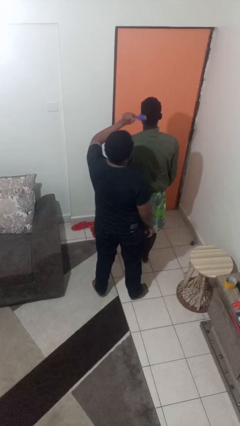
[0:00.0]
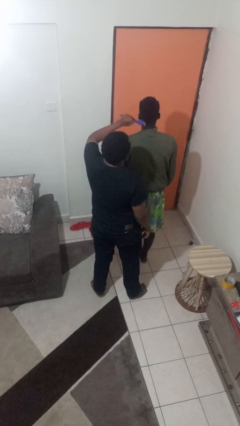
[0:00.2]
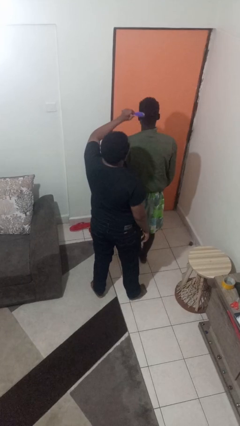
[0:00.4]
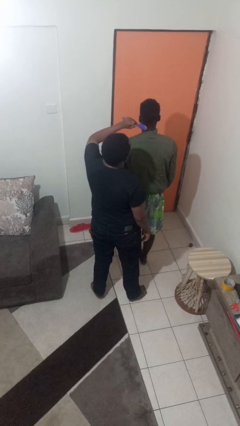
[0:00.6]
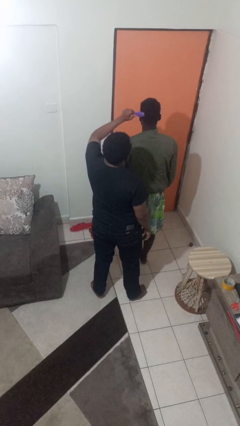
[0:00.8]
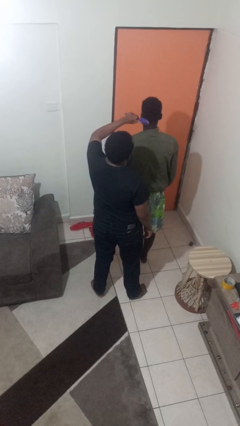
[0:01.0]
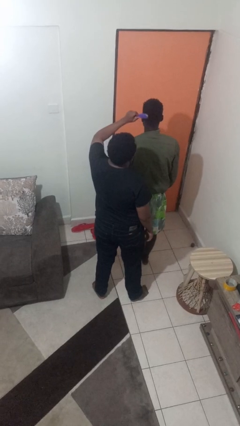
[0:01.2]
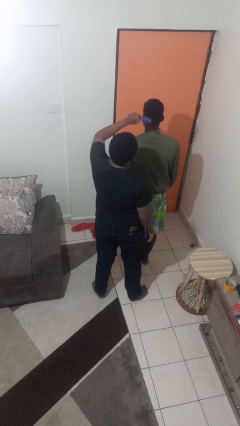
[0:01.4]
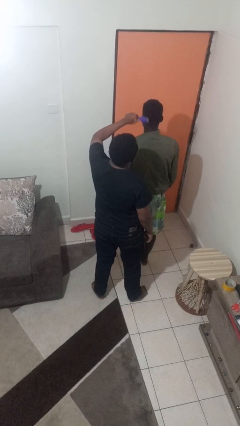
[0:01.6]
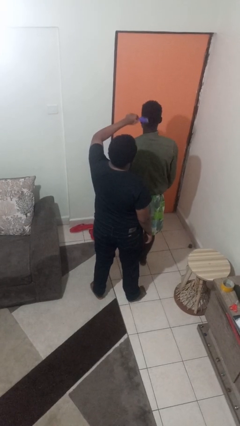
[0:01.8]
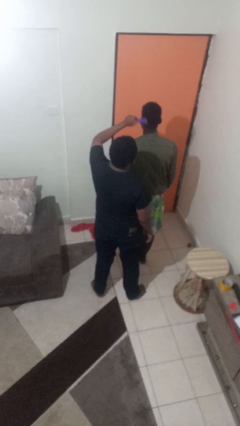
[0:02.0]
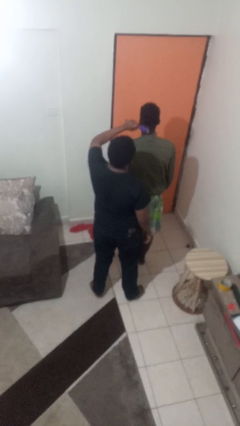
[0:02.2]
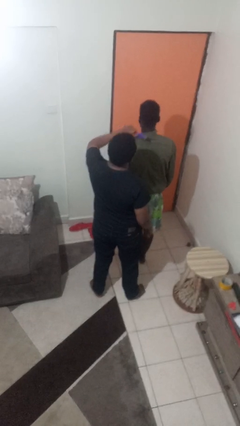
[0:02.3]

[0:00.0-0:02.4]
person brushes hair of person

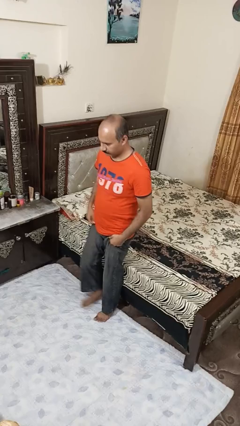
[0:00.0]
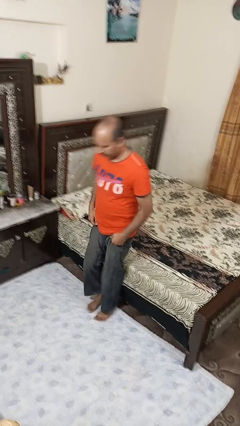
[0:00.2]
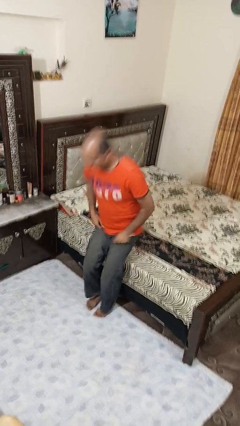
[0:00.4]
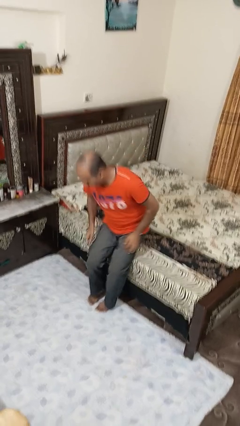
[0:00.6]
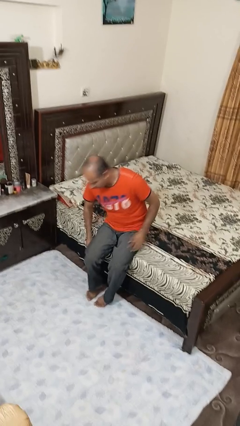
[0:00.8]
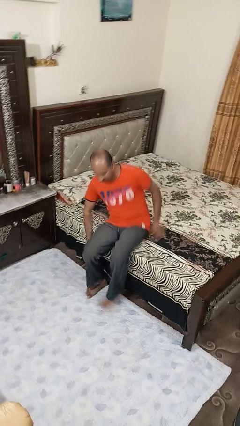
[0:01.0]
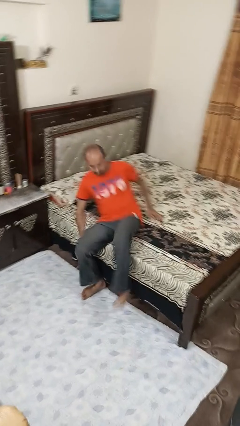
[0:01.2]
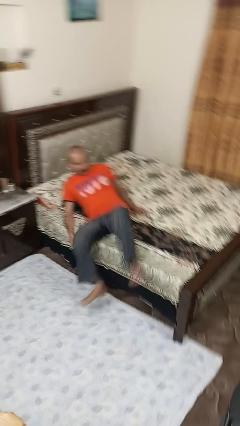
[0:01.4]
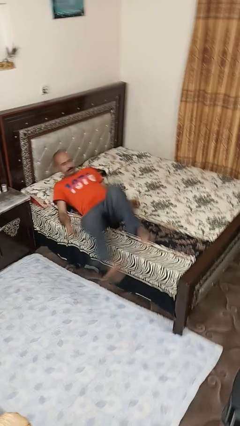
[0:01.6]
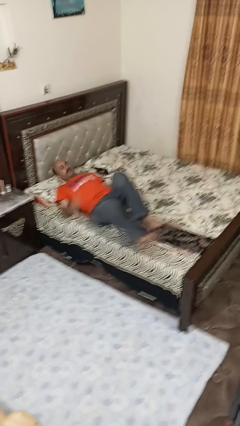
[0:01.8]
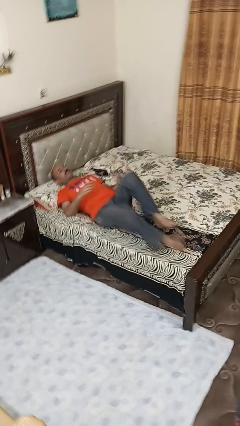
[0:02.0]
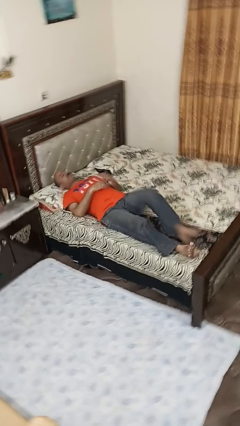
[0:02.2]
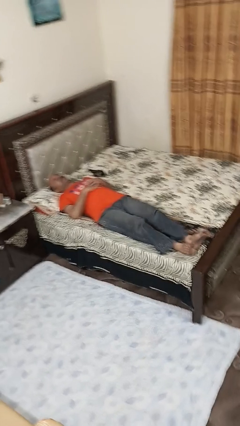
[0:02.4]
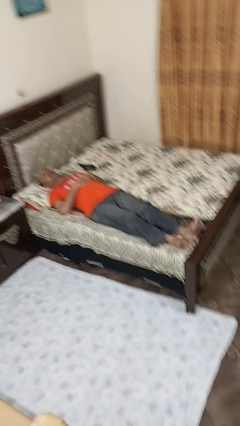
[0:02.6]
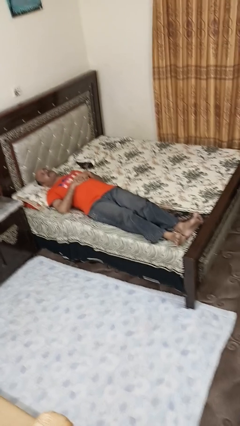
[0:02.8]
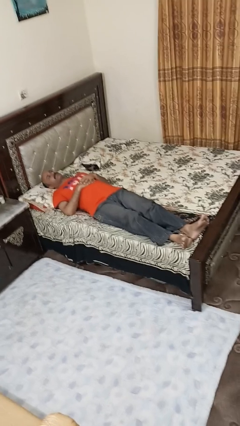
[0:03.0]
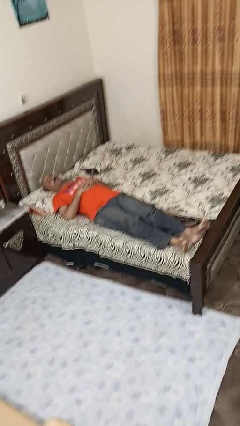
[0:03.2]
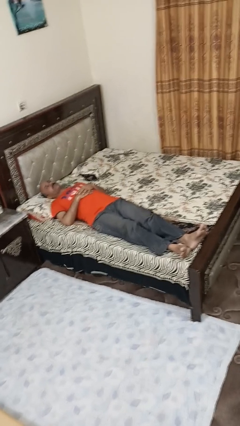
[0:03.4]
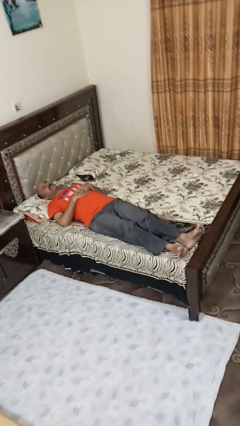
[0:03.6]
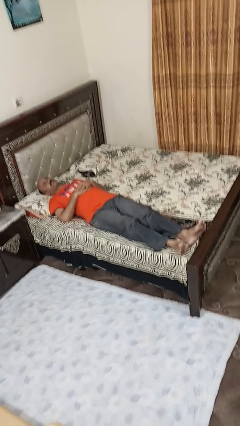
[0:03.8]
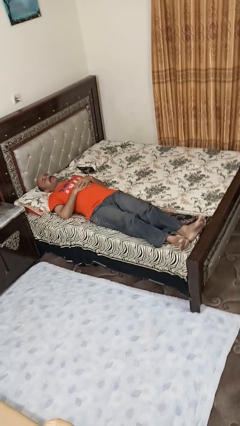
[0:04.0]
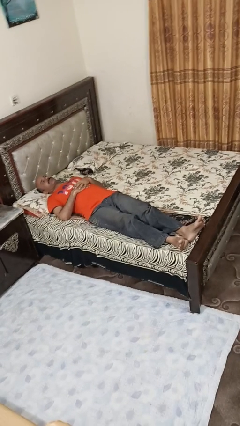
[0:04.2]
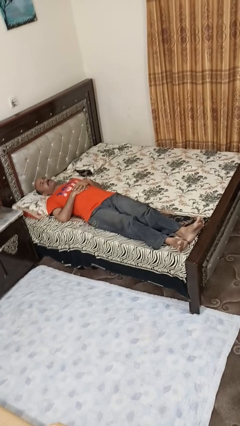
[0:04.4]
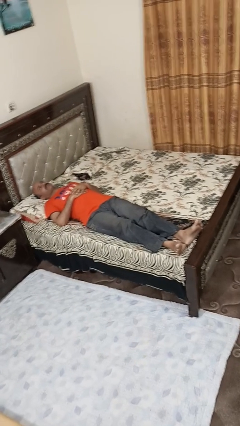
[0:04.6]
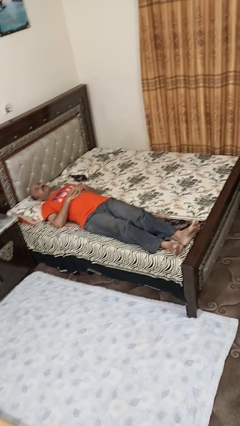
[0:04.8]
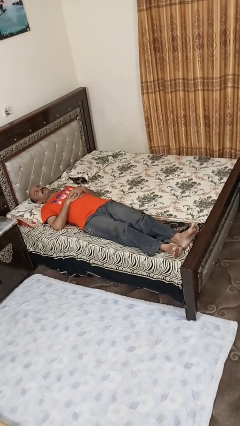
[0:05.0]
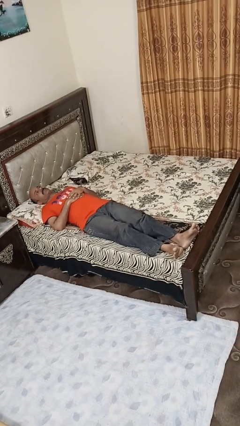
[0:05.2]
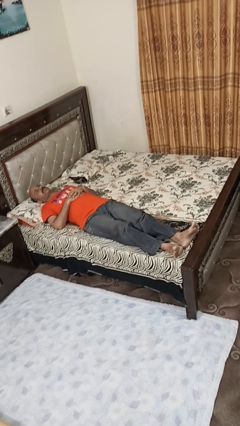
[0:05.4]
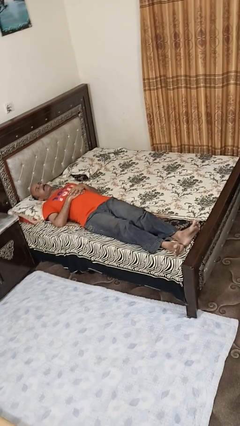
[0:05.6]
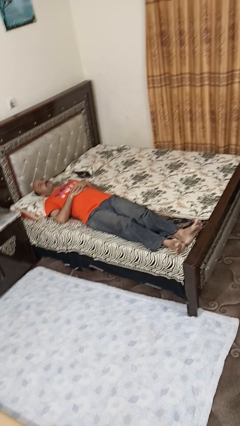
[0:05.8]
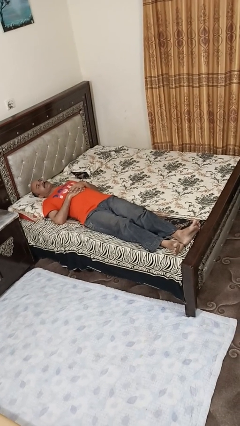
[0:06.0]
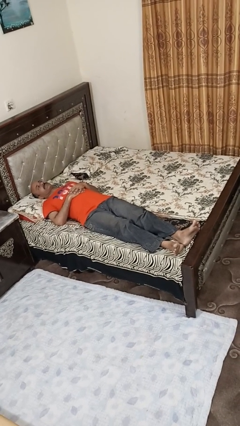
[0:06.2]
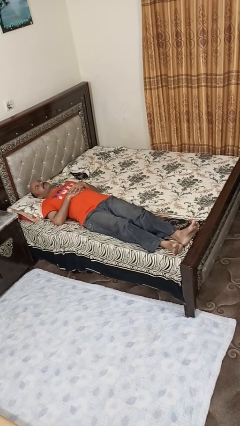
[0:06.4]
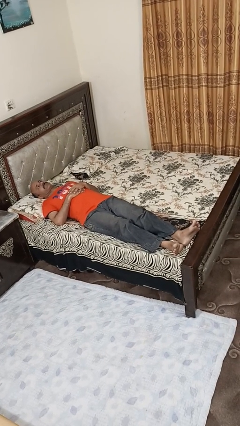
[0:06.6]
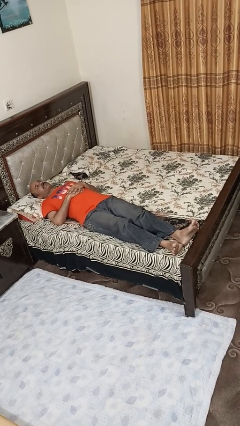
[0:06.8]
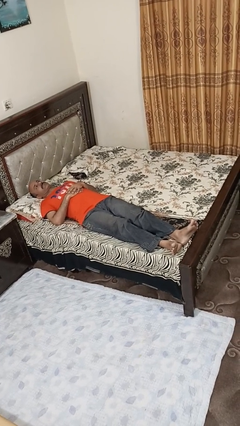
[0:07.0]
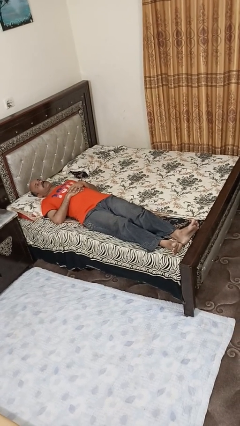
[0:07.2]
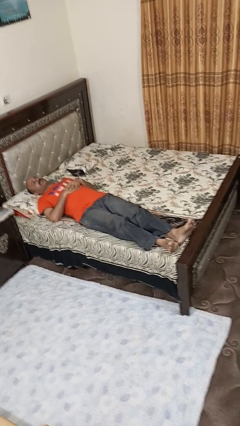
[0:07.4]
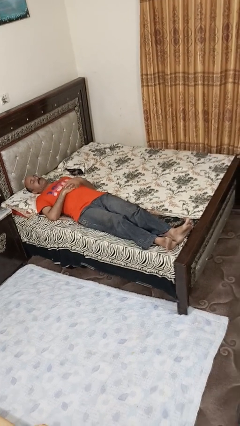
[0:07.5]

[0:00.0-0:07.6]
person lies down on bed

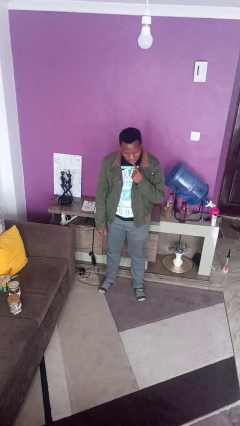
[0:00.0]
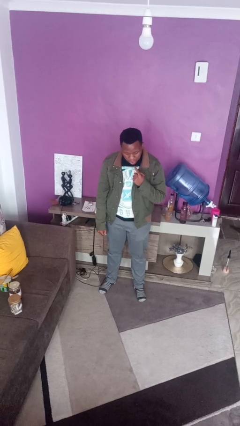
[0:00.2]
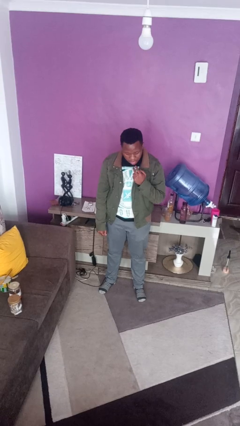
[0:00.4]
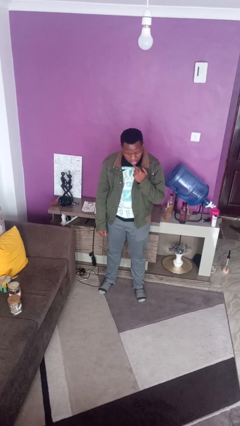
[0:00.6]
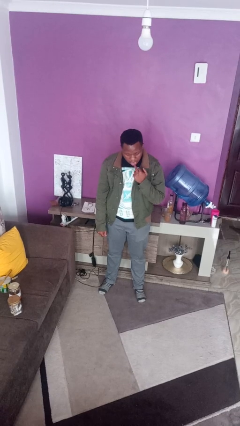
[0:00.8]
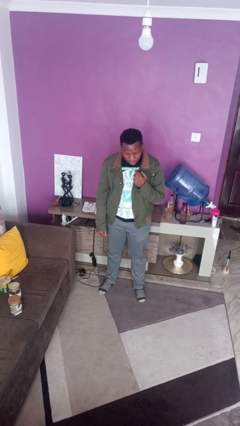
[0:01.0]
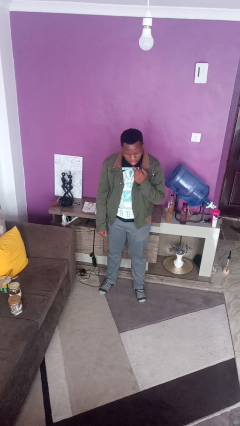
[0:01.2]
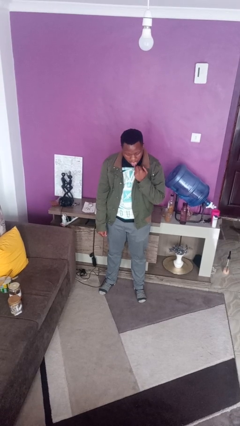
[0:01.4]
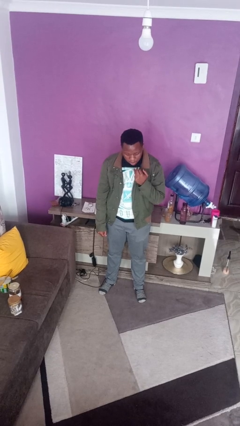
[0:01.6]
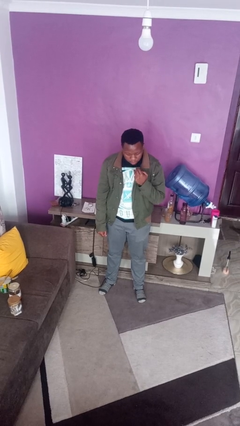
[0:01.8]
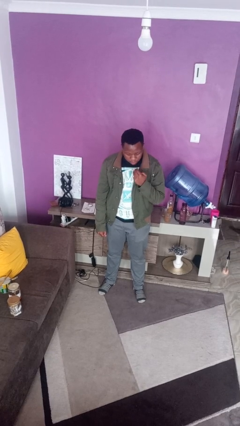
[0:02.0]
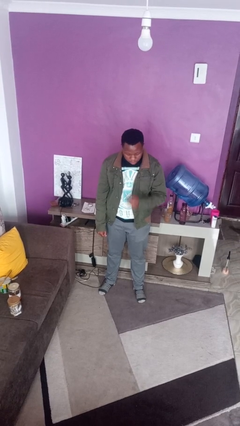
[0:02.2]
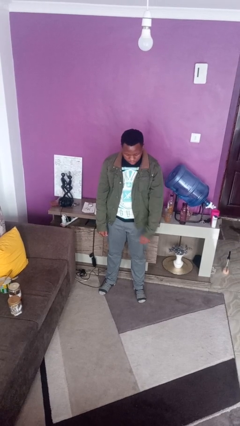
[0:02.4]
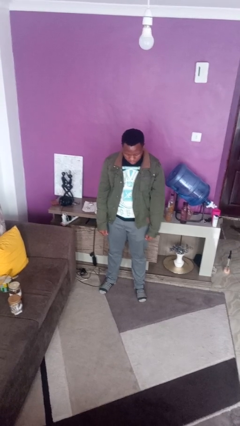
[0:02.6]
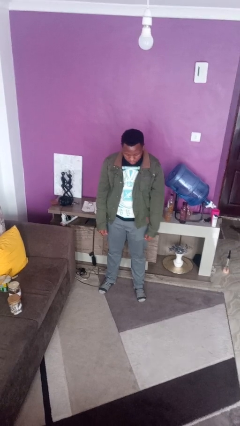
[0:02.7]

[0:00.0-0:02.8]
person licks fingers

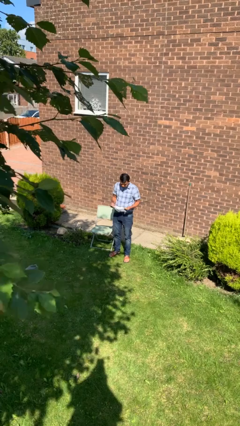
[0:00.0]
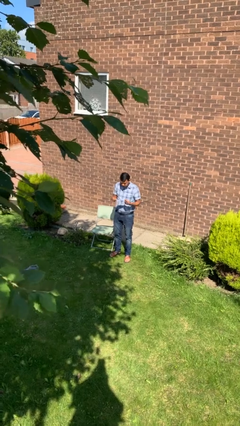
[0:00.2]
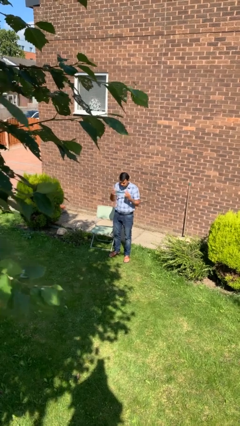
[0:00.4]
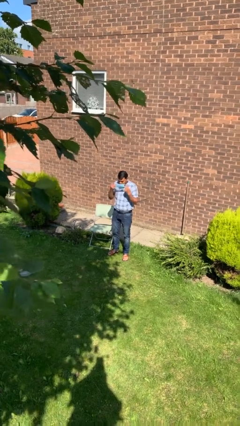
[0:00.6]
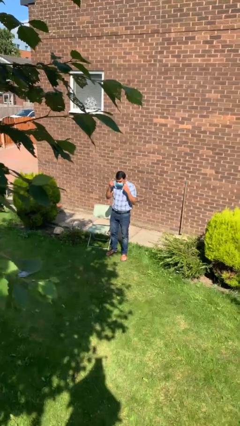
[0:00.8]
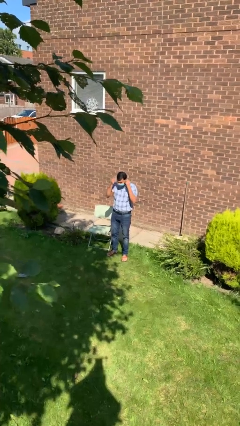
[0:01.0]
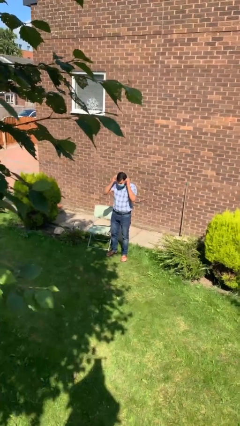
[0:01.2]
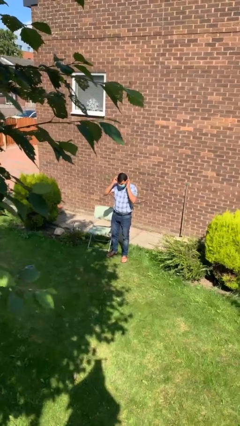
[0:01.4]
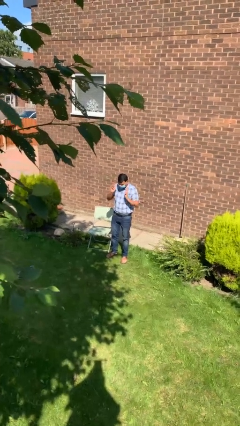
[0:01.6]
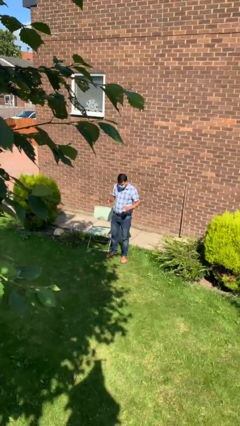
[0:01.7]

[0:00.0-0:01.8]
person puts on facemask

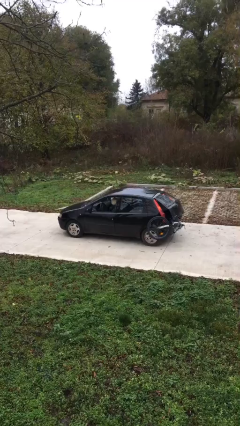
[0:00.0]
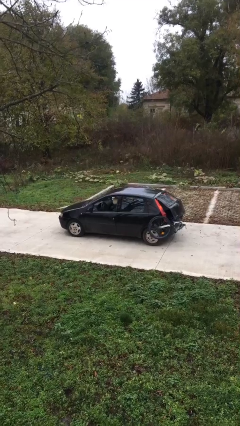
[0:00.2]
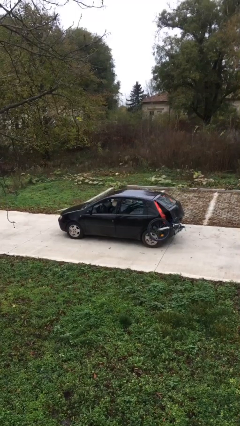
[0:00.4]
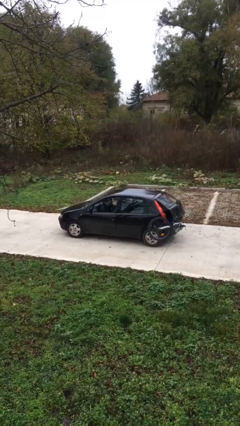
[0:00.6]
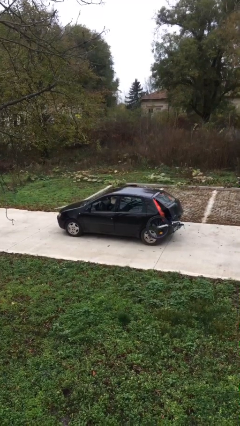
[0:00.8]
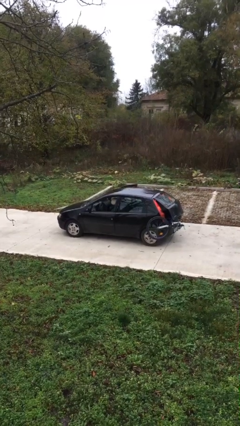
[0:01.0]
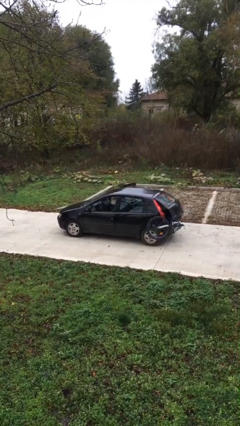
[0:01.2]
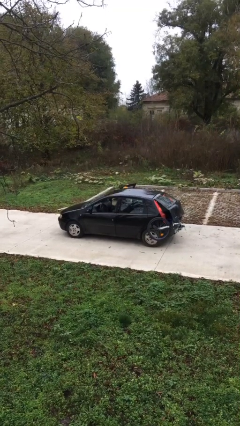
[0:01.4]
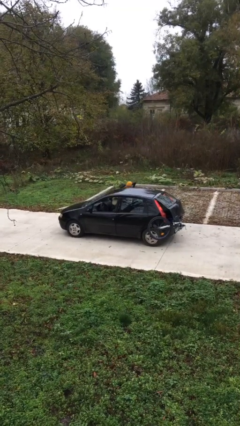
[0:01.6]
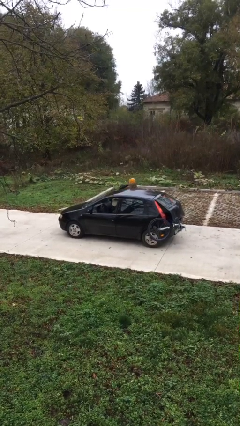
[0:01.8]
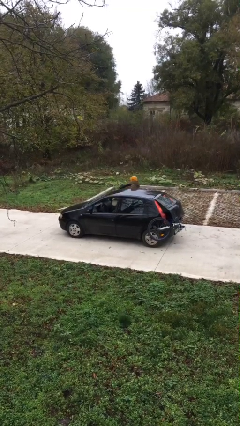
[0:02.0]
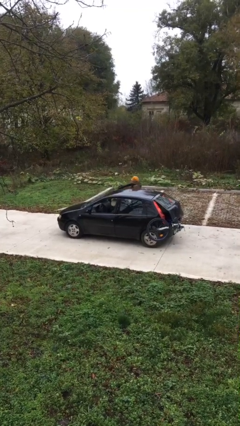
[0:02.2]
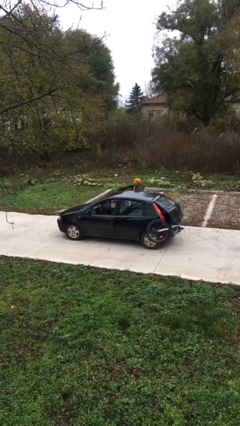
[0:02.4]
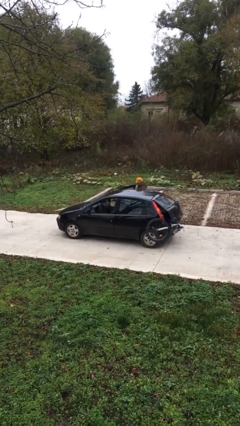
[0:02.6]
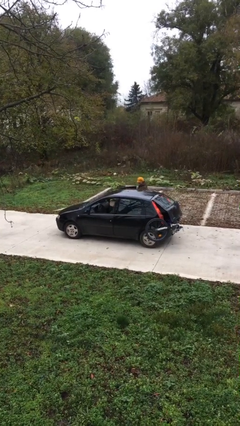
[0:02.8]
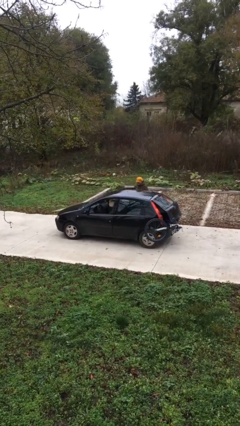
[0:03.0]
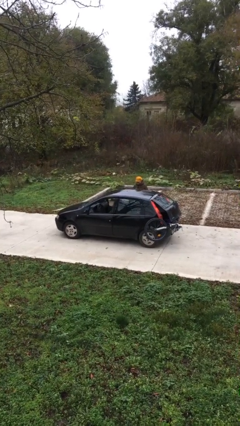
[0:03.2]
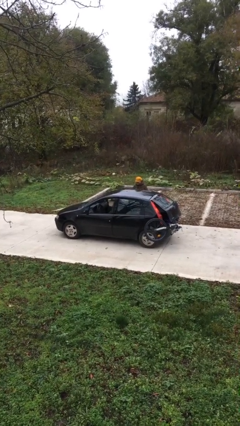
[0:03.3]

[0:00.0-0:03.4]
car drops off person
